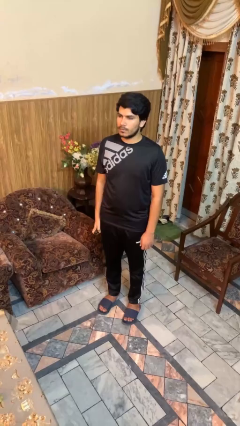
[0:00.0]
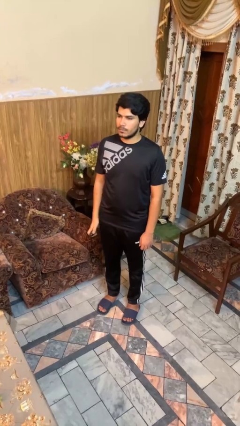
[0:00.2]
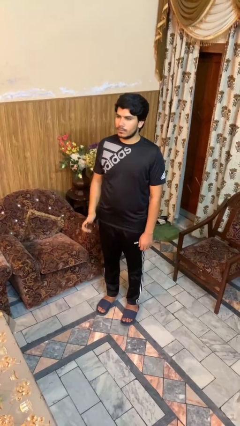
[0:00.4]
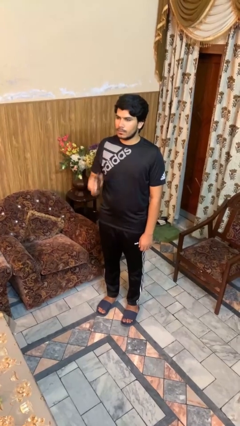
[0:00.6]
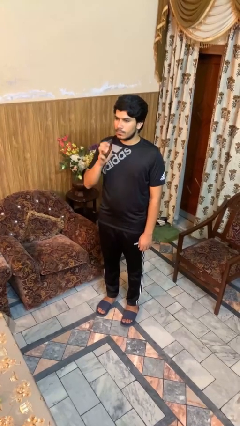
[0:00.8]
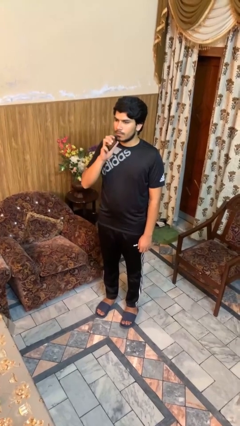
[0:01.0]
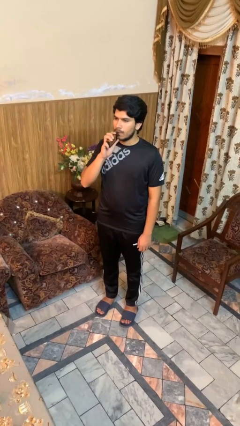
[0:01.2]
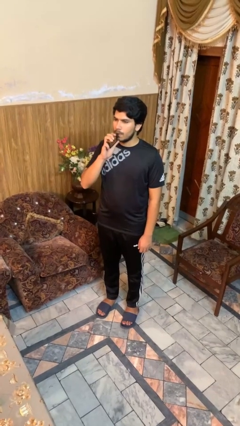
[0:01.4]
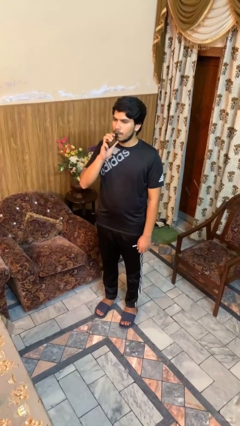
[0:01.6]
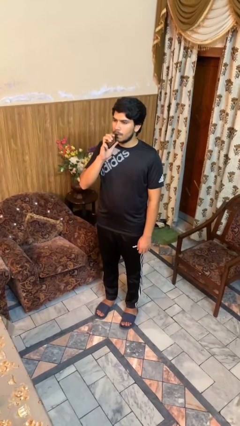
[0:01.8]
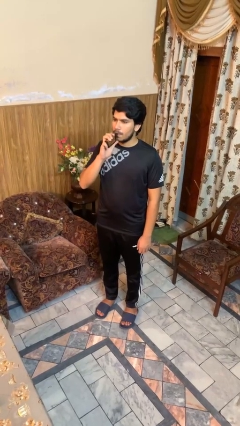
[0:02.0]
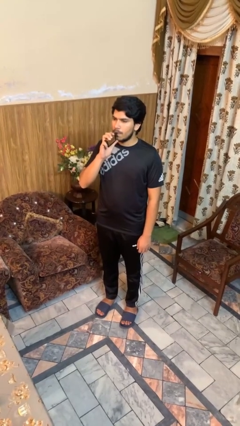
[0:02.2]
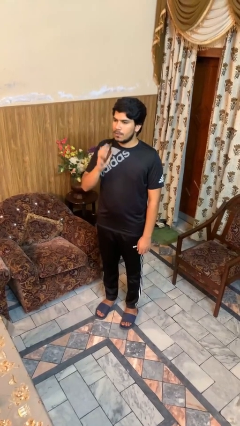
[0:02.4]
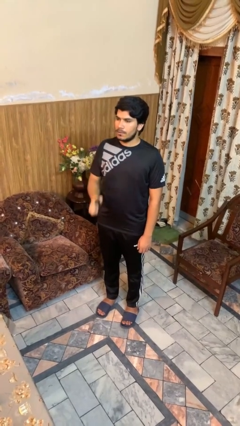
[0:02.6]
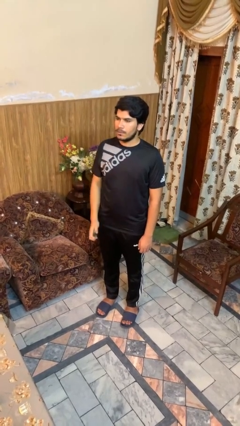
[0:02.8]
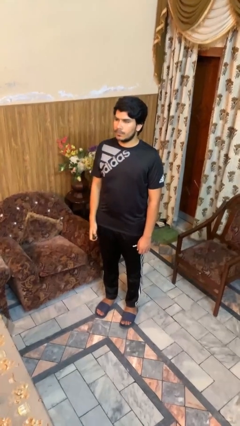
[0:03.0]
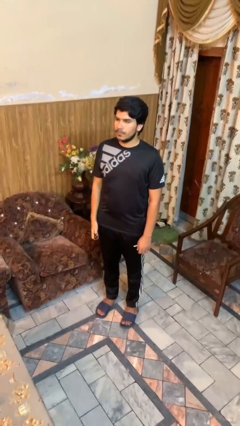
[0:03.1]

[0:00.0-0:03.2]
person vapes

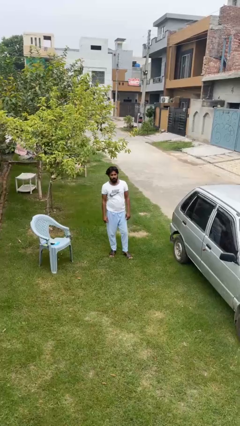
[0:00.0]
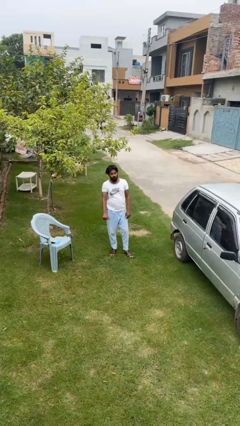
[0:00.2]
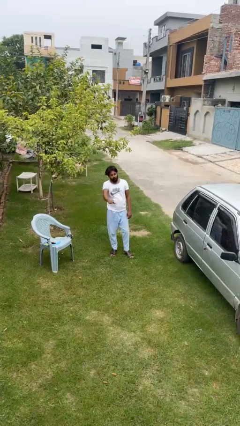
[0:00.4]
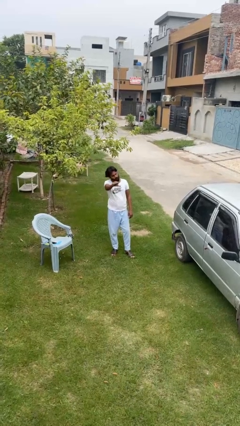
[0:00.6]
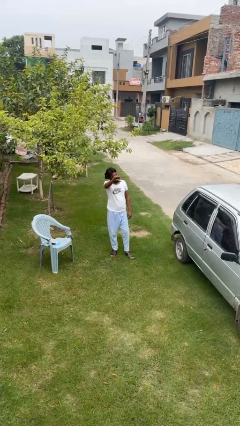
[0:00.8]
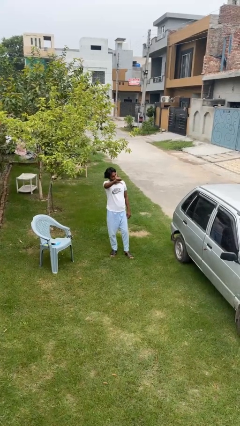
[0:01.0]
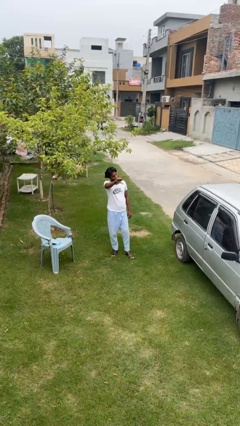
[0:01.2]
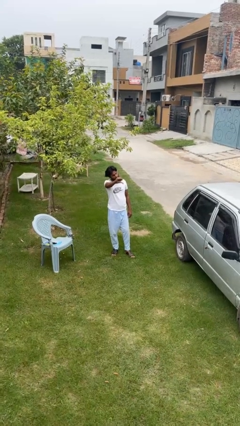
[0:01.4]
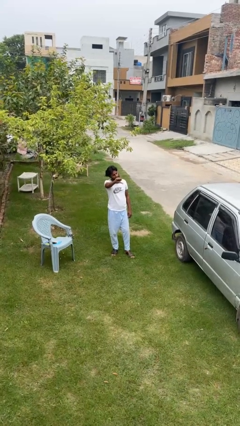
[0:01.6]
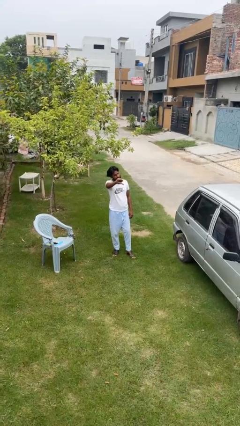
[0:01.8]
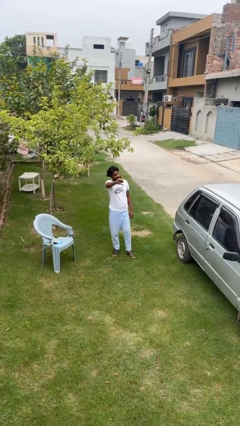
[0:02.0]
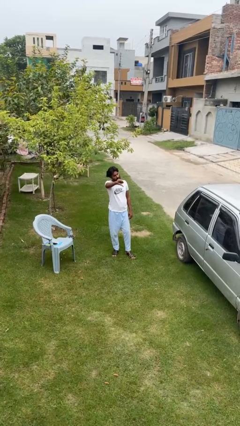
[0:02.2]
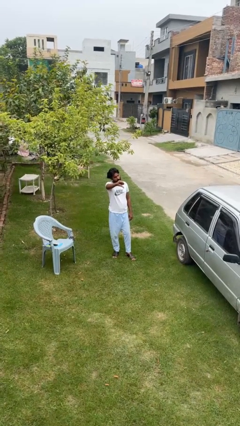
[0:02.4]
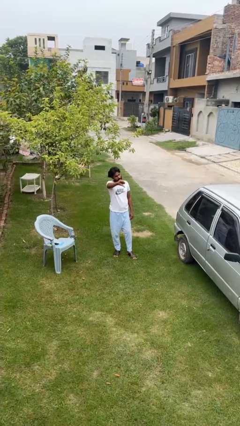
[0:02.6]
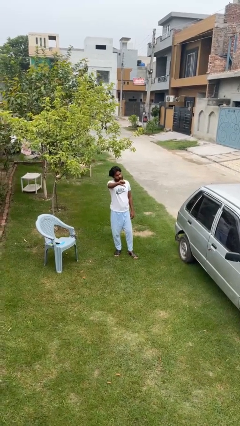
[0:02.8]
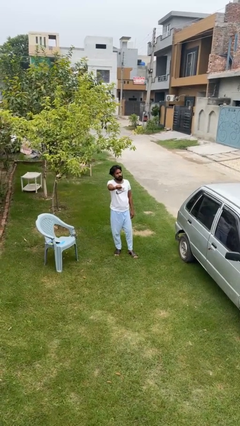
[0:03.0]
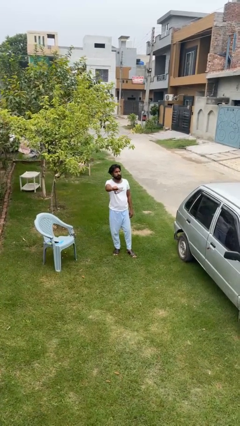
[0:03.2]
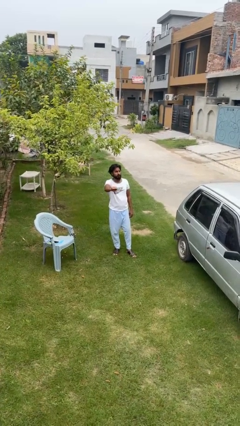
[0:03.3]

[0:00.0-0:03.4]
person gestures thumbs down

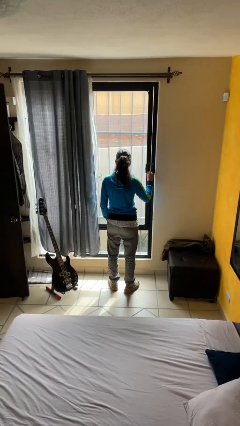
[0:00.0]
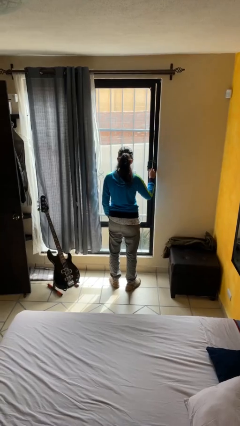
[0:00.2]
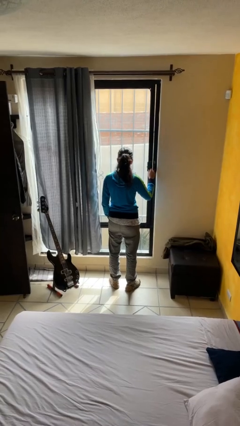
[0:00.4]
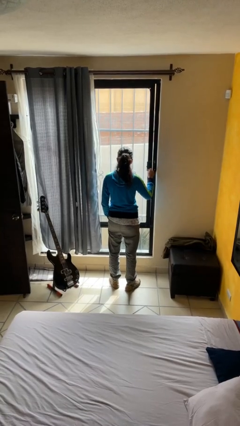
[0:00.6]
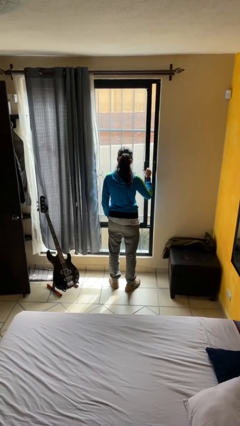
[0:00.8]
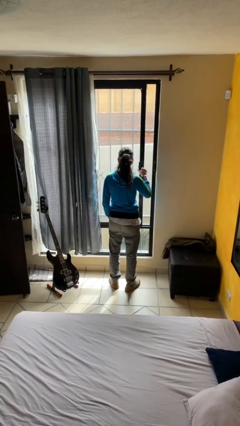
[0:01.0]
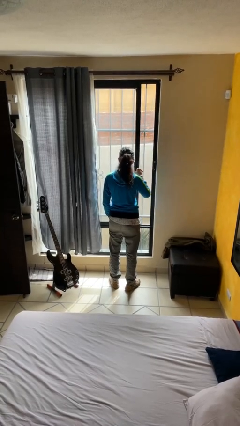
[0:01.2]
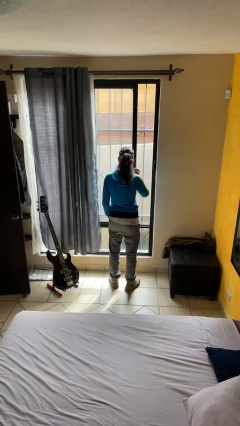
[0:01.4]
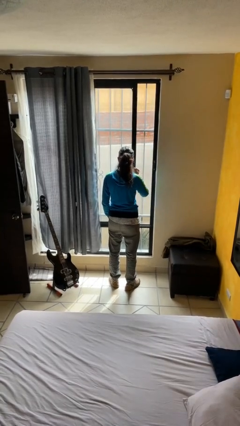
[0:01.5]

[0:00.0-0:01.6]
person opens home window

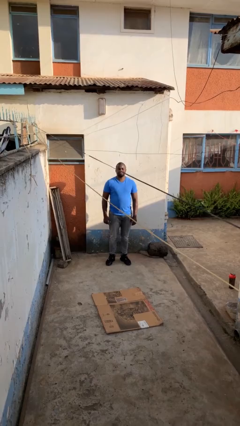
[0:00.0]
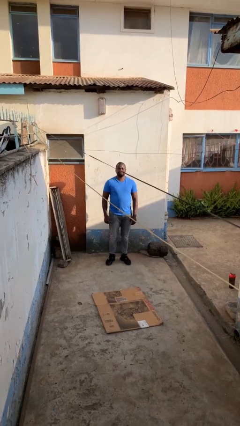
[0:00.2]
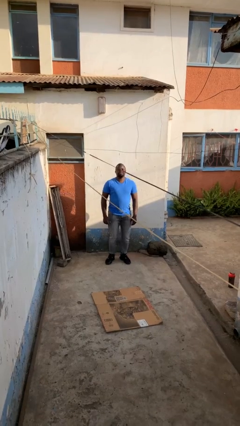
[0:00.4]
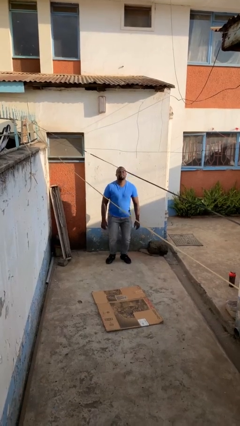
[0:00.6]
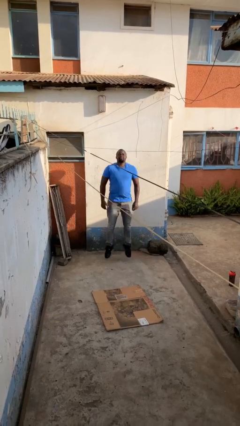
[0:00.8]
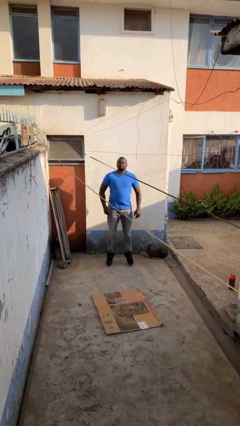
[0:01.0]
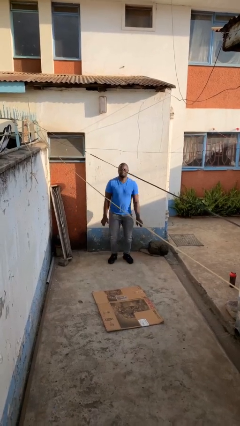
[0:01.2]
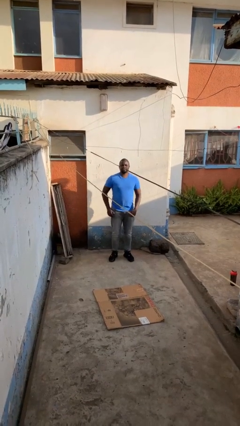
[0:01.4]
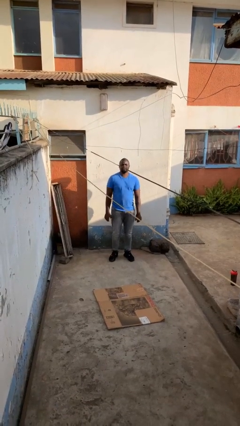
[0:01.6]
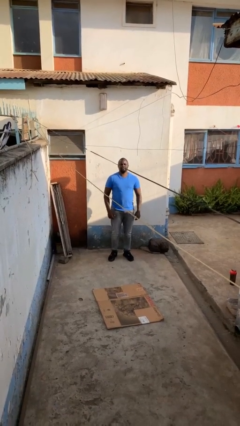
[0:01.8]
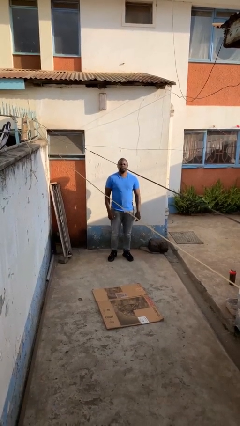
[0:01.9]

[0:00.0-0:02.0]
person jumps

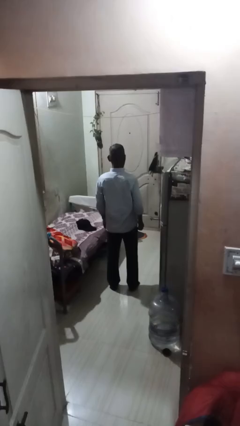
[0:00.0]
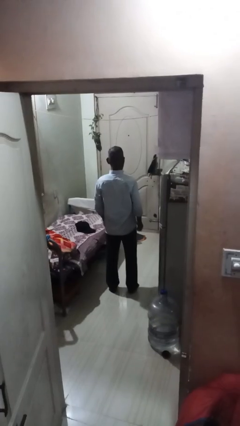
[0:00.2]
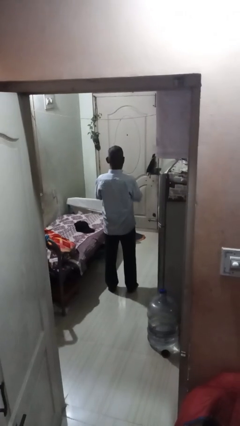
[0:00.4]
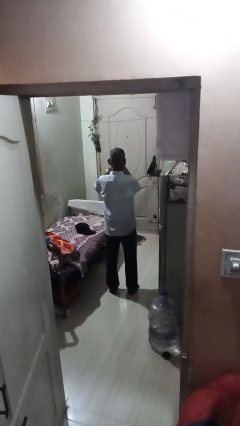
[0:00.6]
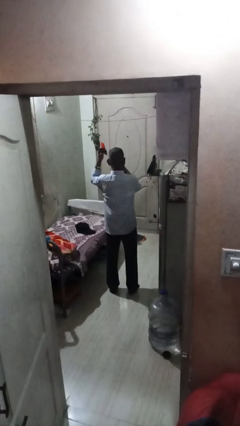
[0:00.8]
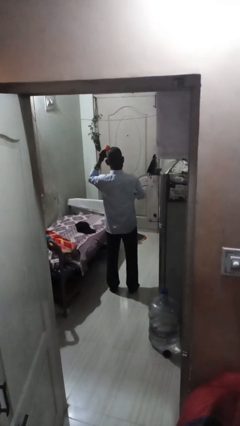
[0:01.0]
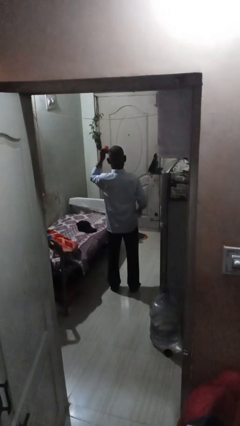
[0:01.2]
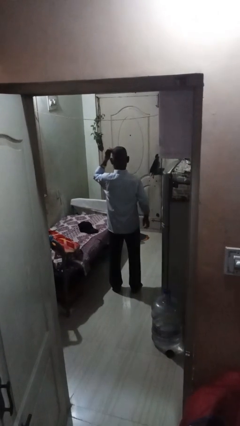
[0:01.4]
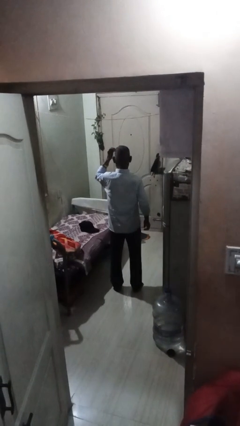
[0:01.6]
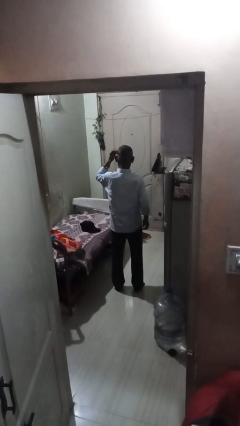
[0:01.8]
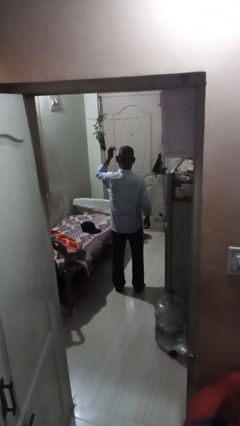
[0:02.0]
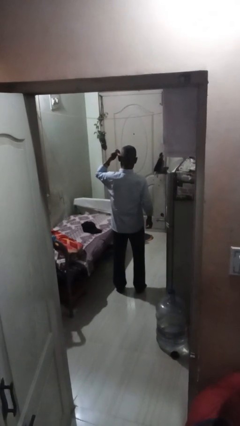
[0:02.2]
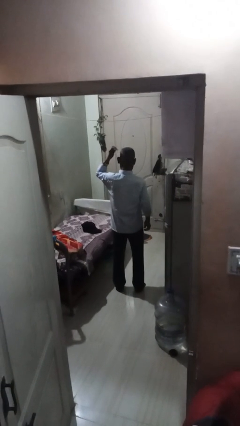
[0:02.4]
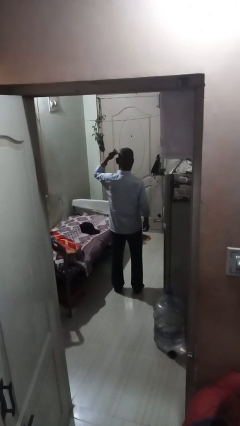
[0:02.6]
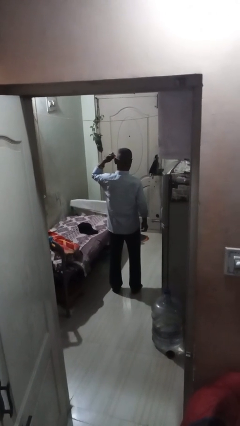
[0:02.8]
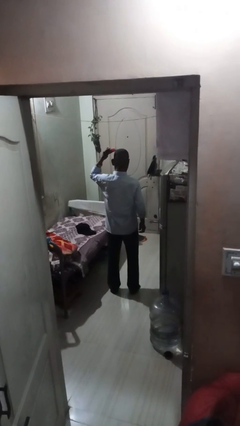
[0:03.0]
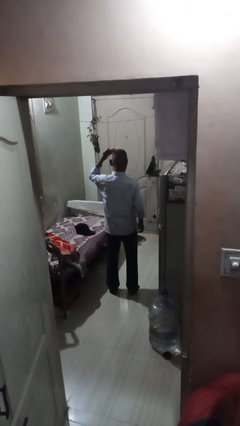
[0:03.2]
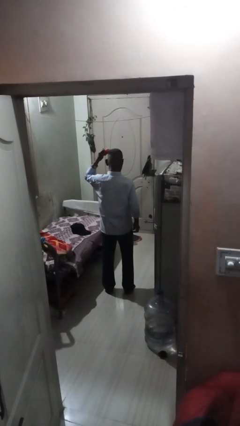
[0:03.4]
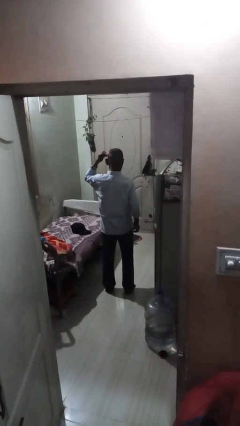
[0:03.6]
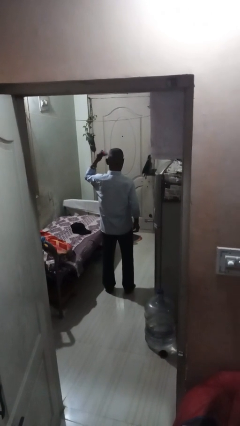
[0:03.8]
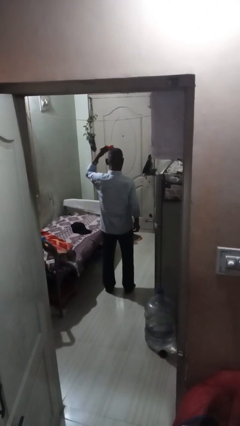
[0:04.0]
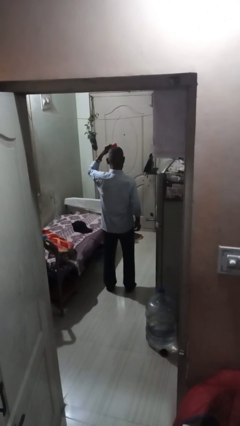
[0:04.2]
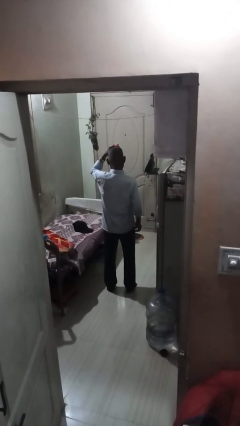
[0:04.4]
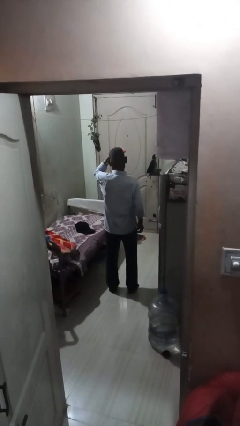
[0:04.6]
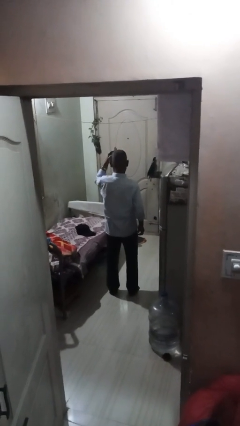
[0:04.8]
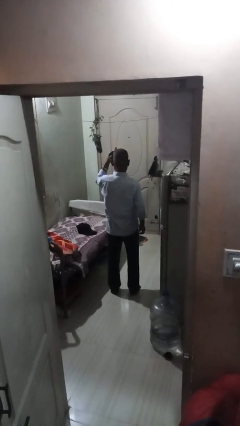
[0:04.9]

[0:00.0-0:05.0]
person brushes hair

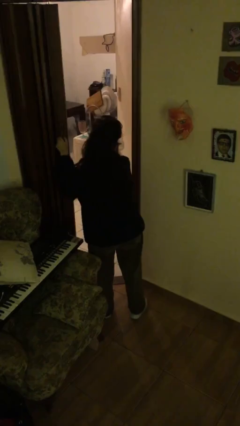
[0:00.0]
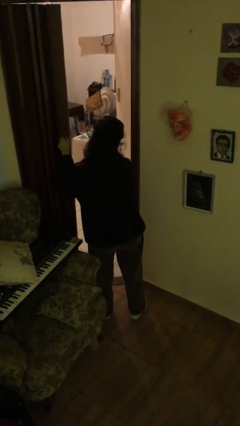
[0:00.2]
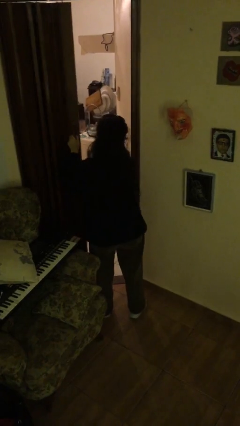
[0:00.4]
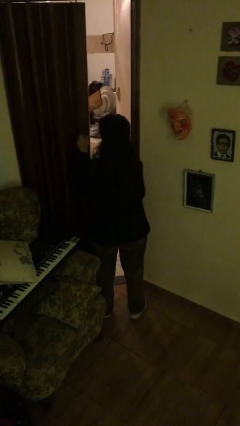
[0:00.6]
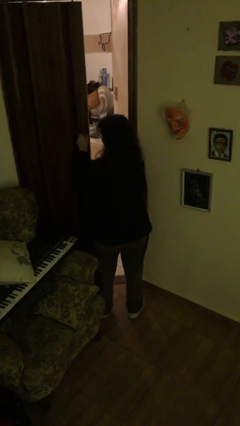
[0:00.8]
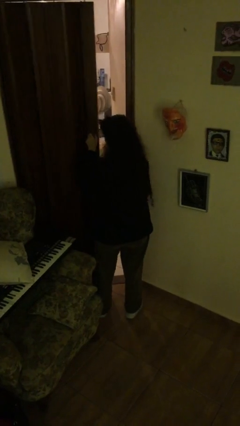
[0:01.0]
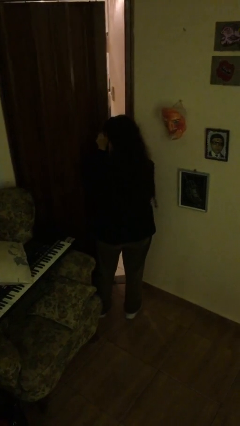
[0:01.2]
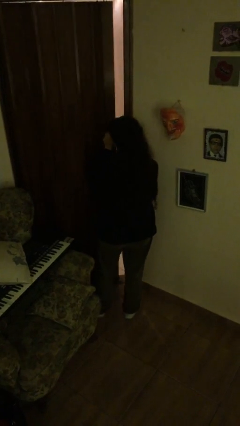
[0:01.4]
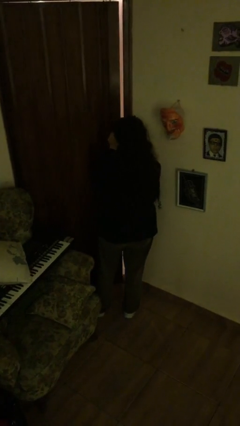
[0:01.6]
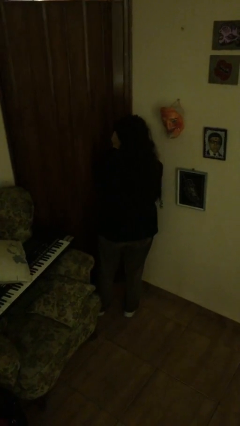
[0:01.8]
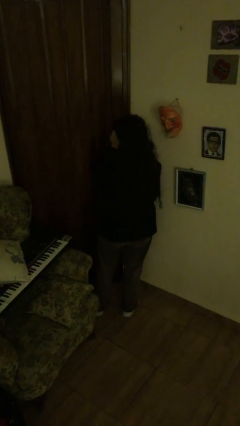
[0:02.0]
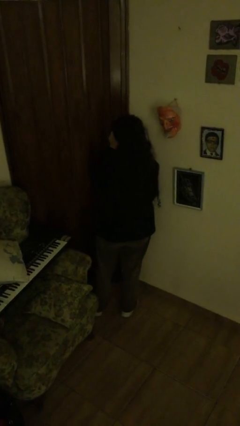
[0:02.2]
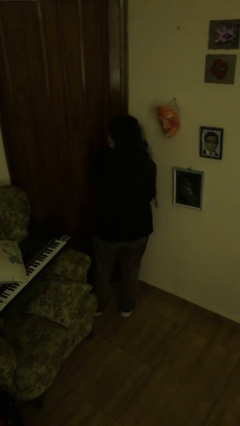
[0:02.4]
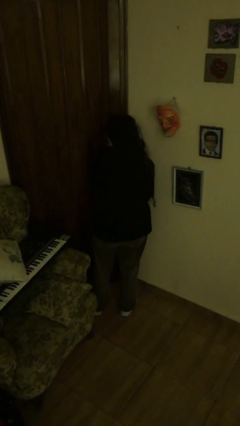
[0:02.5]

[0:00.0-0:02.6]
person closes sliding door
